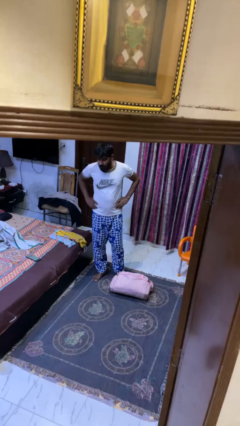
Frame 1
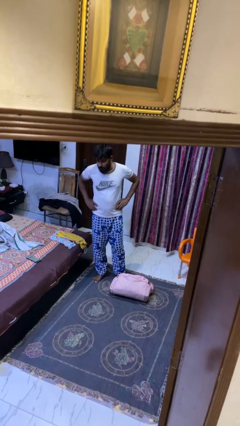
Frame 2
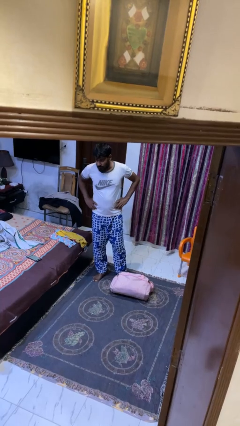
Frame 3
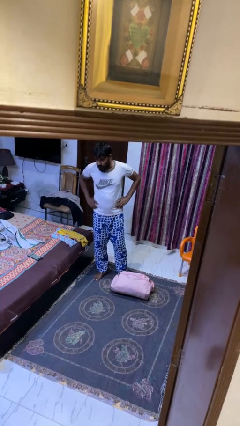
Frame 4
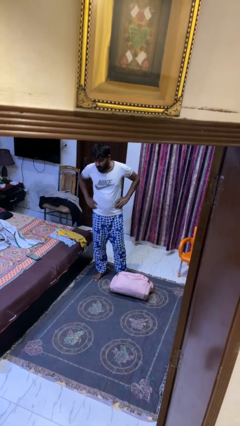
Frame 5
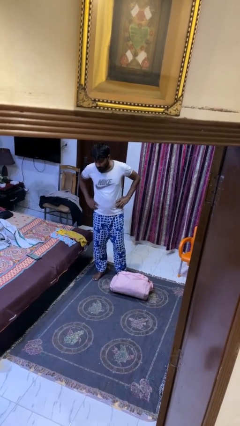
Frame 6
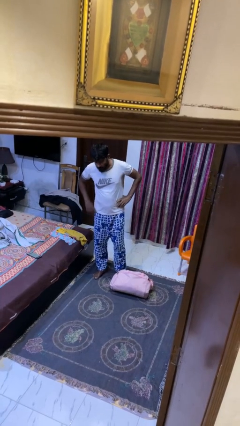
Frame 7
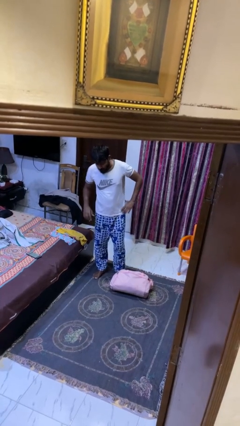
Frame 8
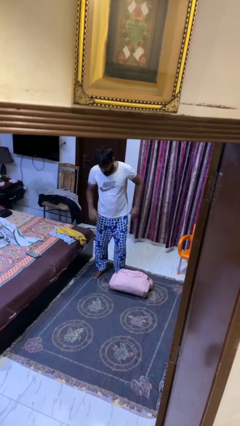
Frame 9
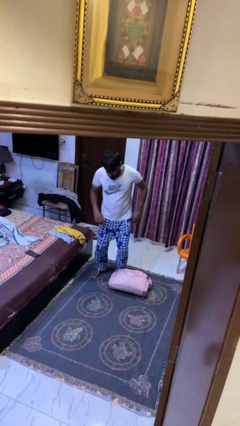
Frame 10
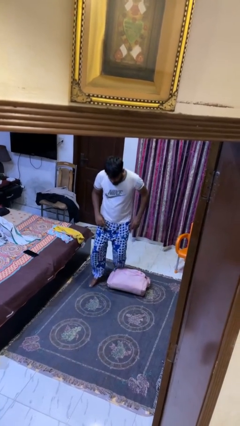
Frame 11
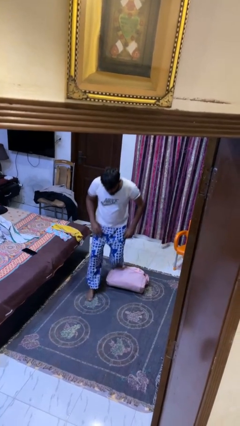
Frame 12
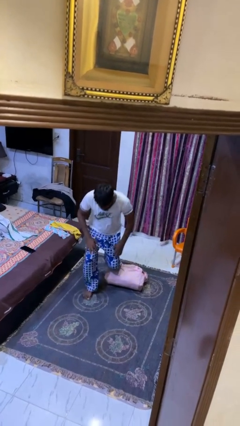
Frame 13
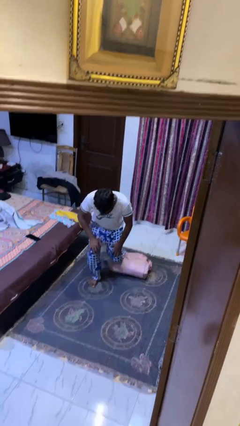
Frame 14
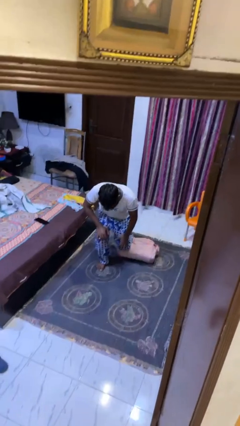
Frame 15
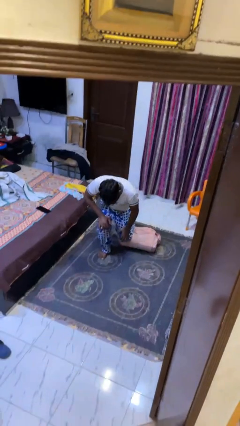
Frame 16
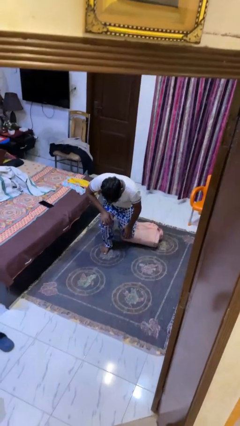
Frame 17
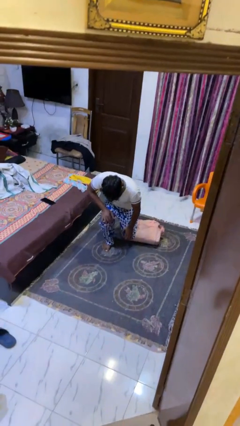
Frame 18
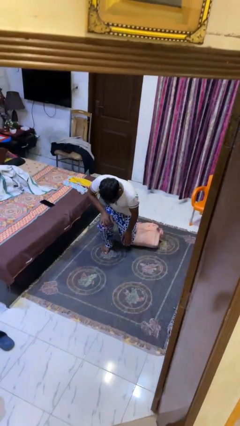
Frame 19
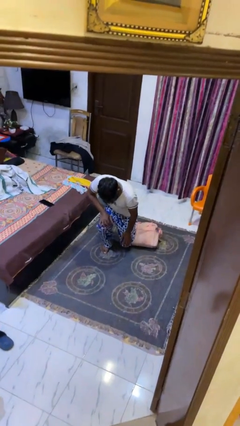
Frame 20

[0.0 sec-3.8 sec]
person trips on object on floor

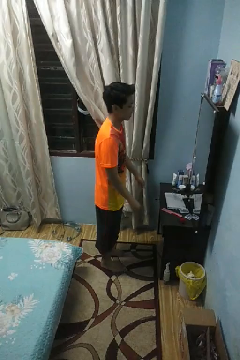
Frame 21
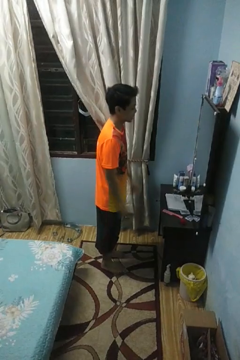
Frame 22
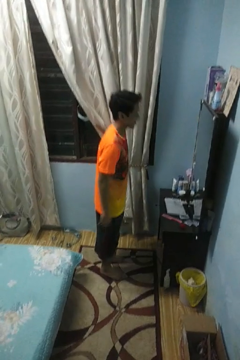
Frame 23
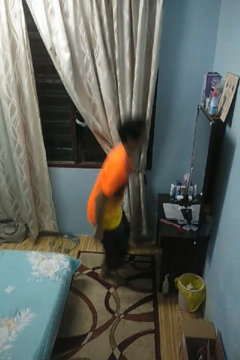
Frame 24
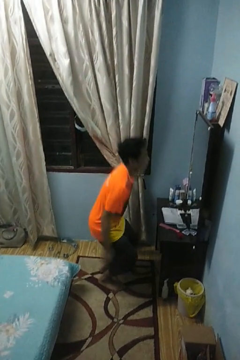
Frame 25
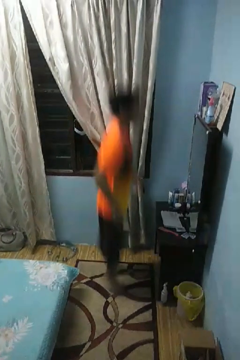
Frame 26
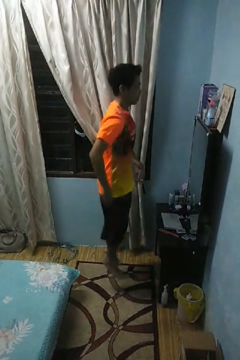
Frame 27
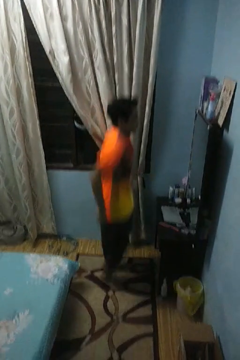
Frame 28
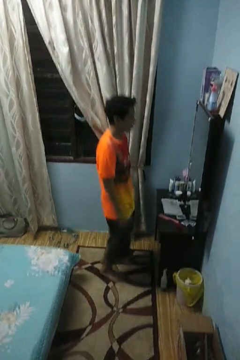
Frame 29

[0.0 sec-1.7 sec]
person jumps

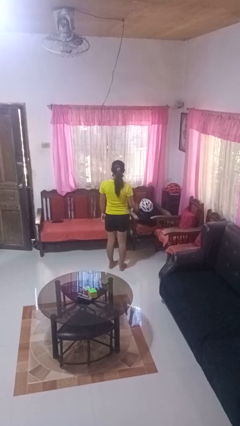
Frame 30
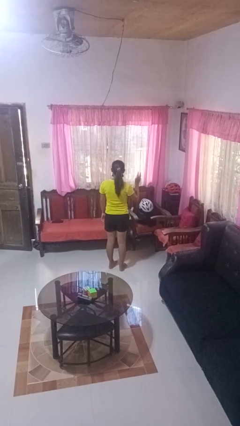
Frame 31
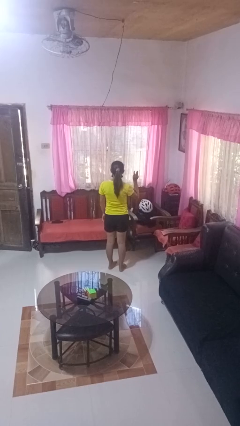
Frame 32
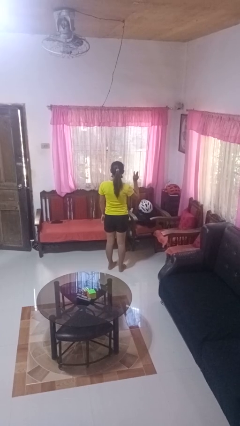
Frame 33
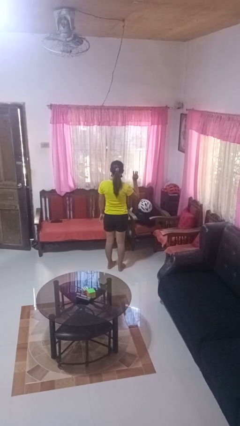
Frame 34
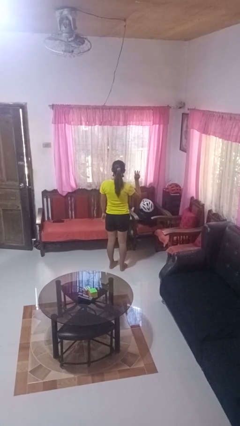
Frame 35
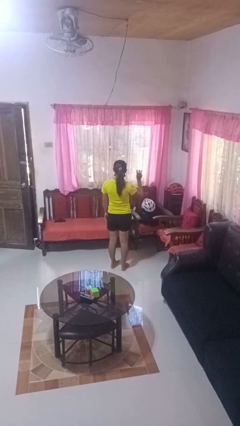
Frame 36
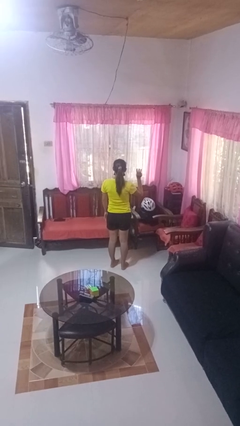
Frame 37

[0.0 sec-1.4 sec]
person gestures number three

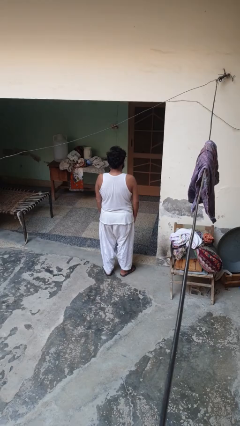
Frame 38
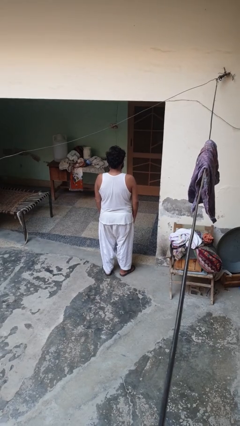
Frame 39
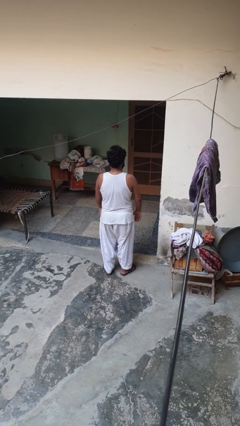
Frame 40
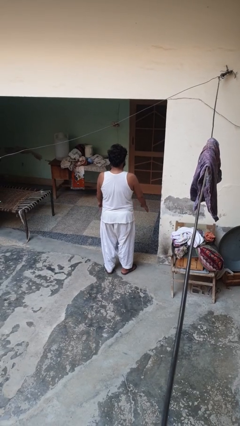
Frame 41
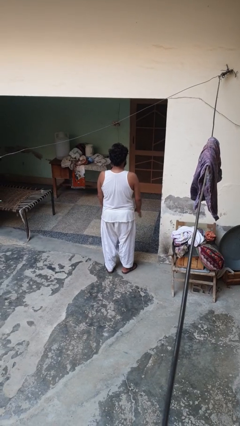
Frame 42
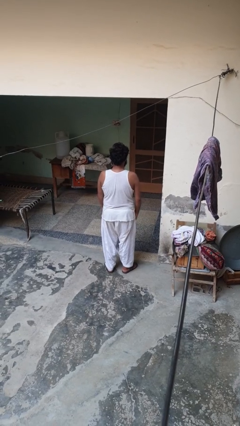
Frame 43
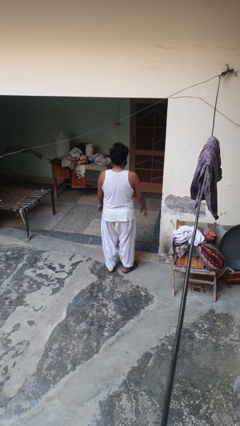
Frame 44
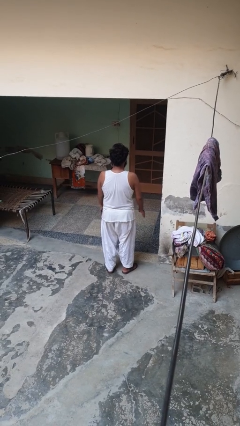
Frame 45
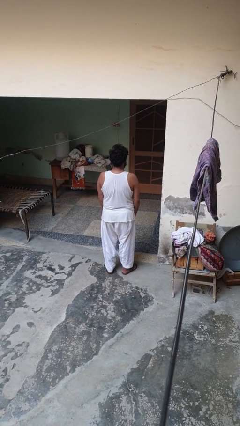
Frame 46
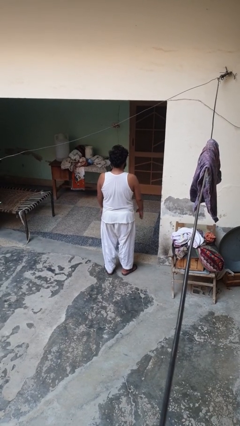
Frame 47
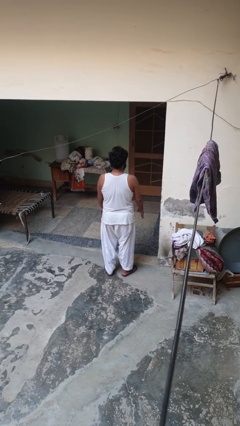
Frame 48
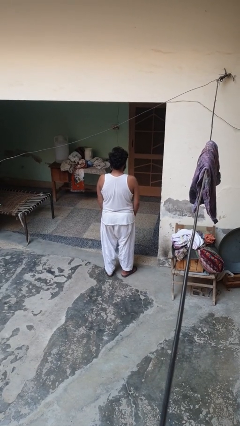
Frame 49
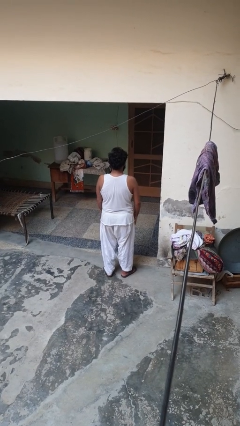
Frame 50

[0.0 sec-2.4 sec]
person slaps hands on thighs

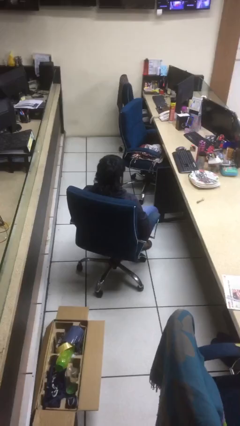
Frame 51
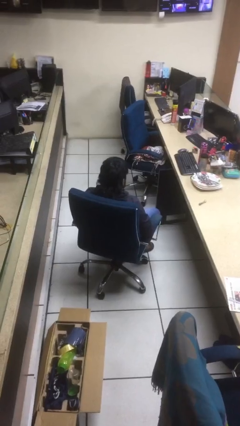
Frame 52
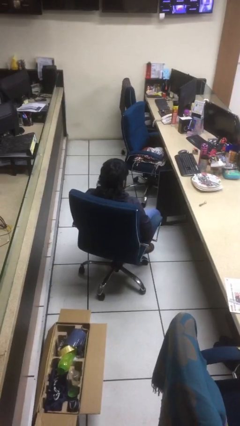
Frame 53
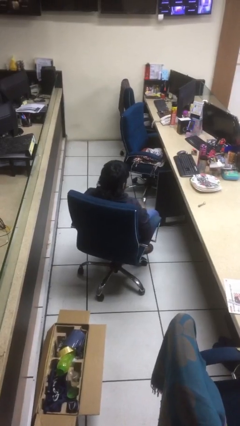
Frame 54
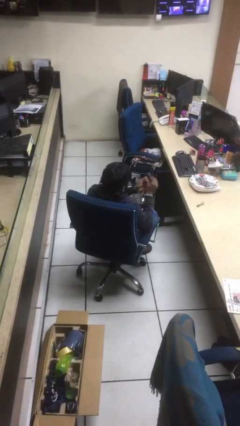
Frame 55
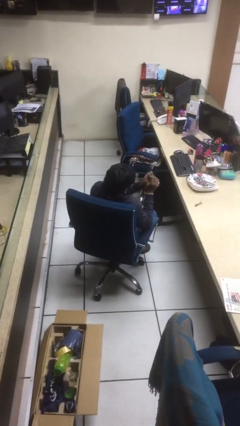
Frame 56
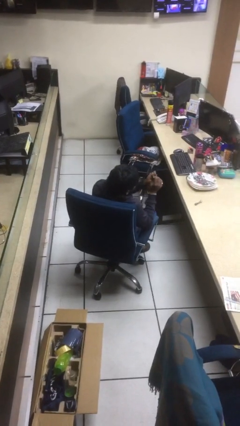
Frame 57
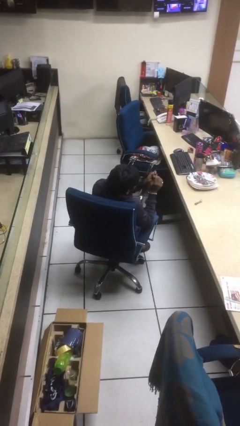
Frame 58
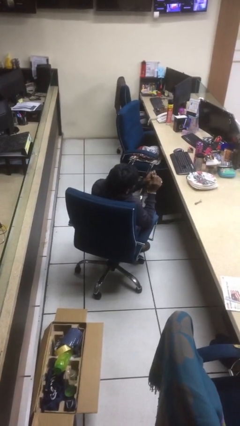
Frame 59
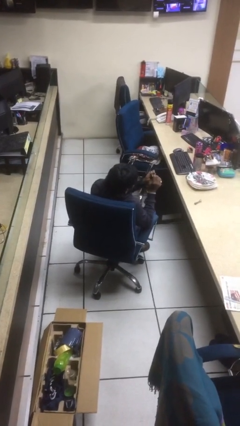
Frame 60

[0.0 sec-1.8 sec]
person files fingernails

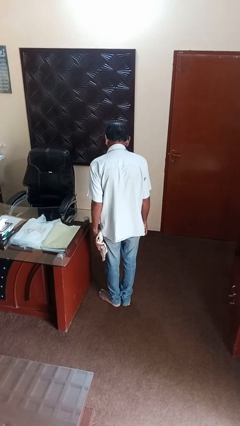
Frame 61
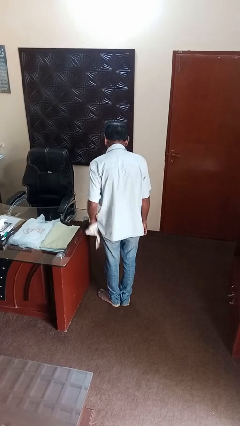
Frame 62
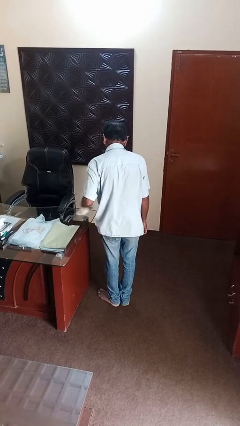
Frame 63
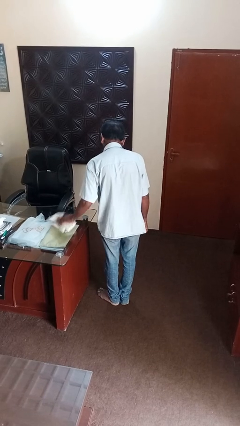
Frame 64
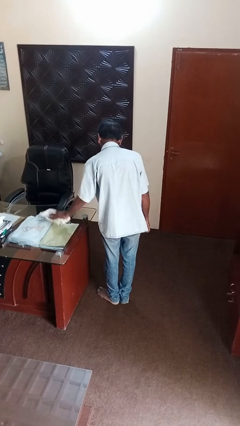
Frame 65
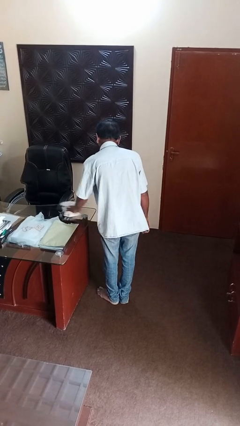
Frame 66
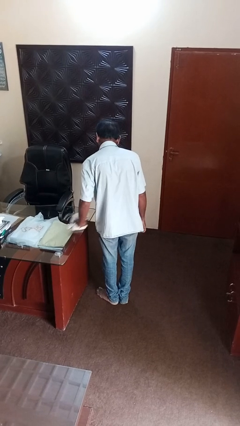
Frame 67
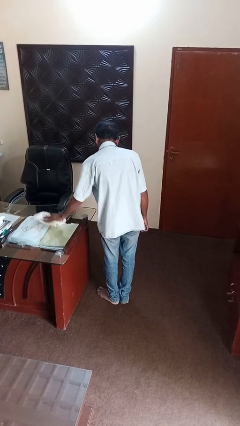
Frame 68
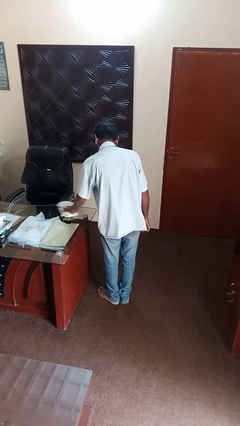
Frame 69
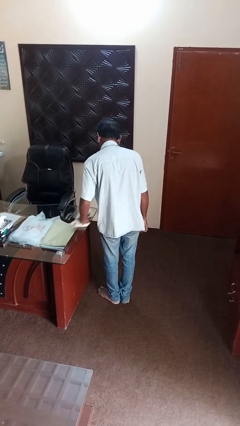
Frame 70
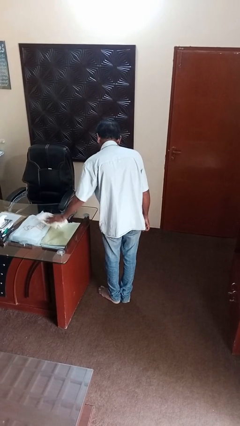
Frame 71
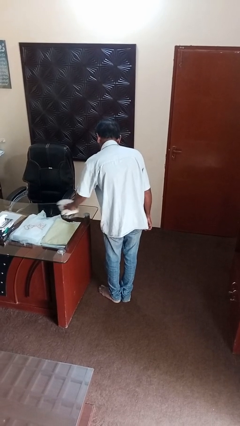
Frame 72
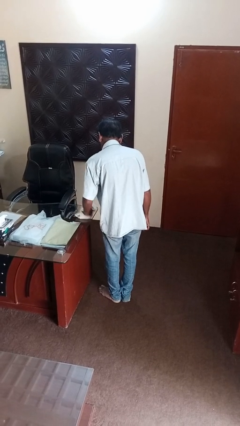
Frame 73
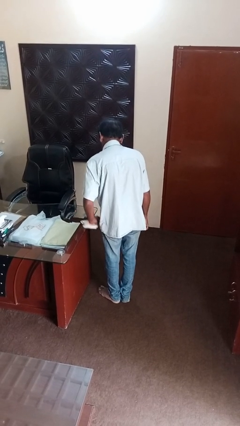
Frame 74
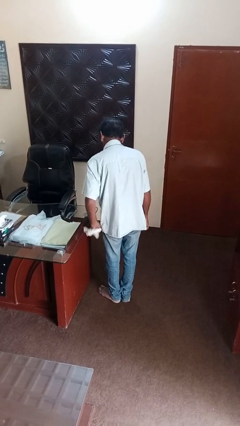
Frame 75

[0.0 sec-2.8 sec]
person cleans table with rag

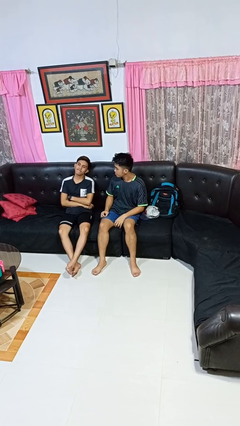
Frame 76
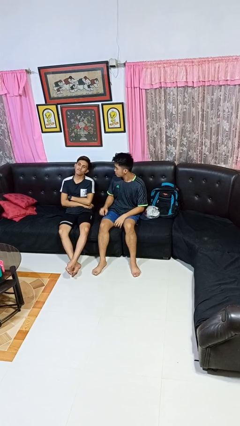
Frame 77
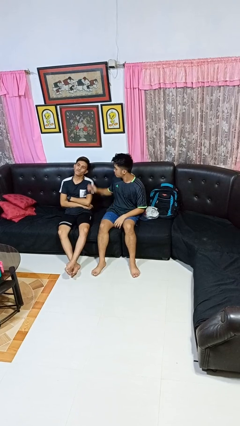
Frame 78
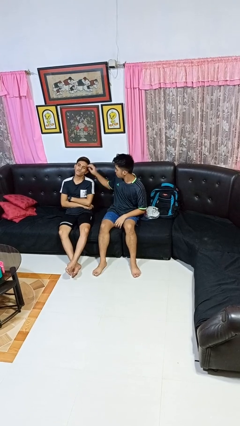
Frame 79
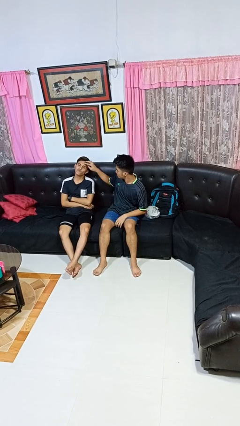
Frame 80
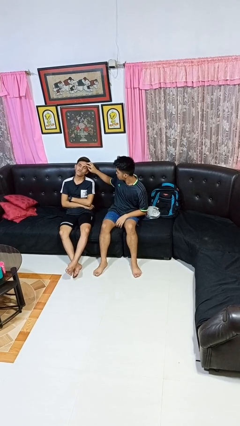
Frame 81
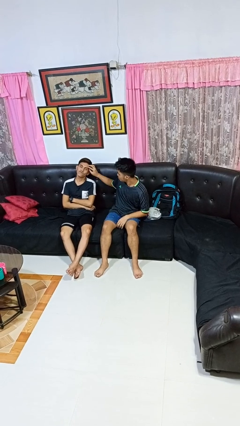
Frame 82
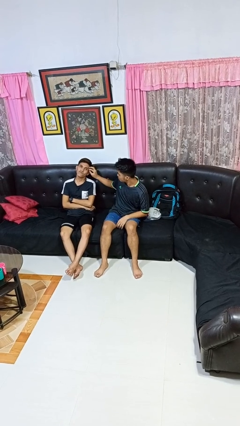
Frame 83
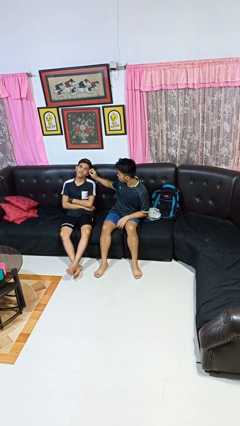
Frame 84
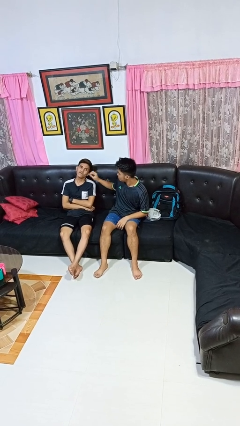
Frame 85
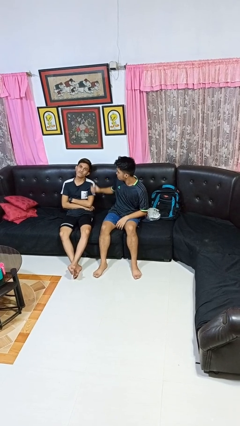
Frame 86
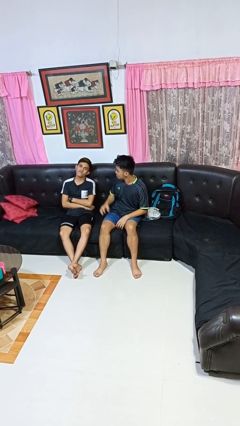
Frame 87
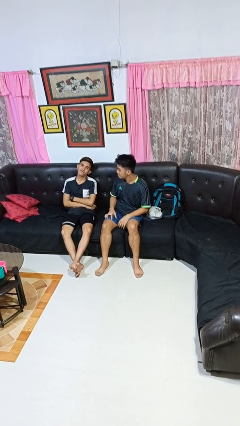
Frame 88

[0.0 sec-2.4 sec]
person touches face of person

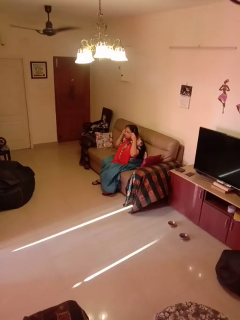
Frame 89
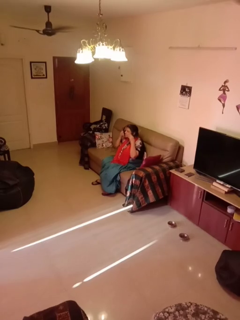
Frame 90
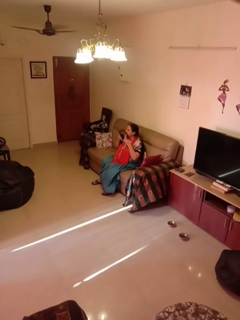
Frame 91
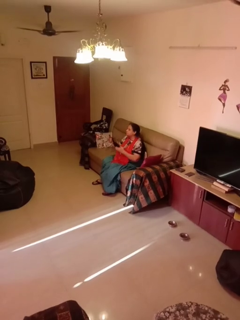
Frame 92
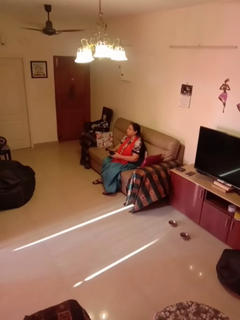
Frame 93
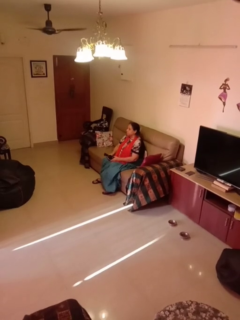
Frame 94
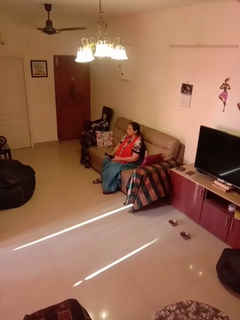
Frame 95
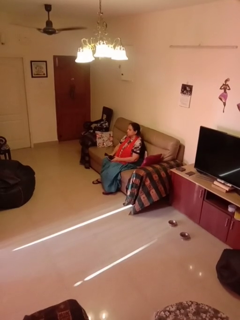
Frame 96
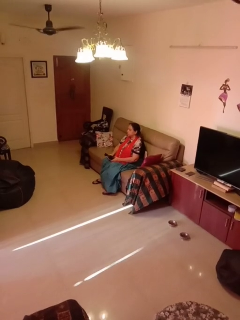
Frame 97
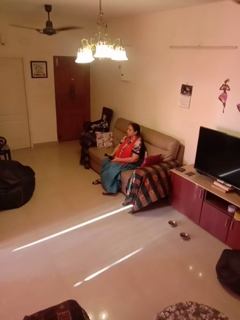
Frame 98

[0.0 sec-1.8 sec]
person takes off headphones
